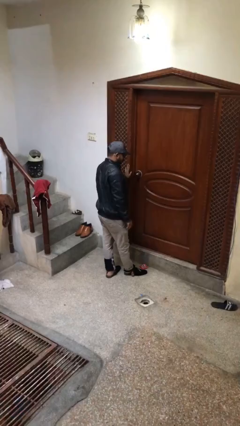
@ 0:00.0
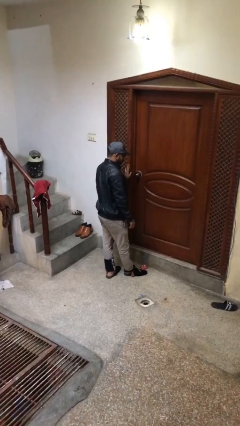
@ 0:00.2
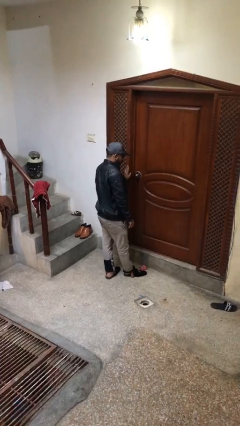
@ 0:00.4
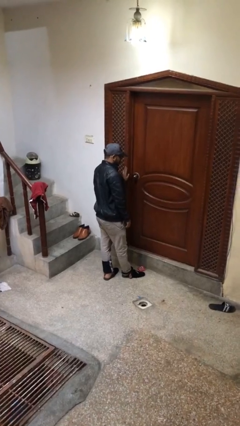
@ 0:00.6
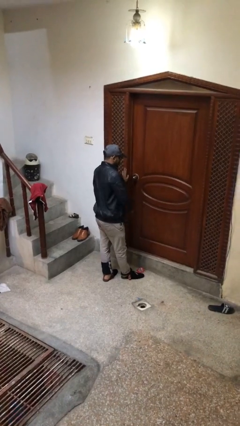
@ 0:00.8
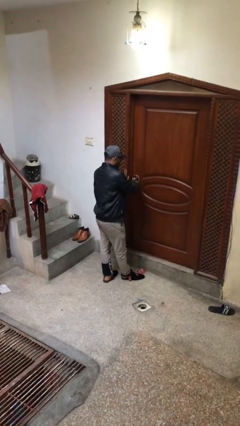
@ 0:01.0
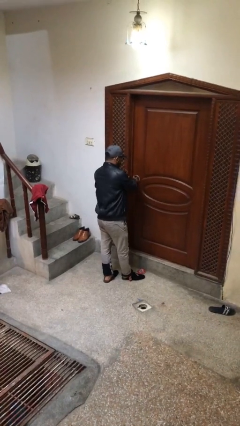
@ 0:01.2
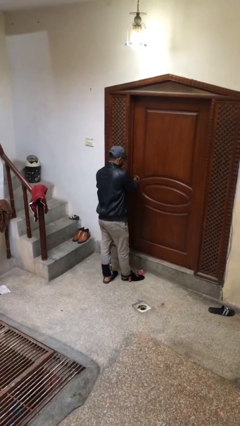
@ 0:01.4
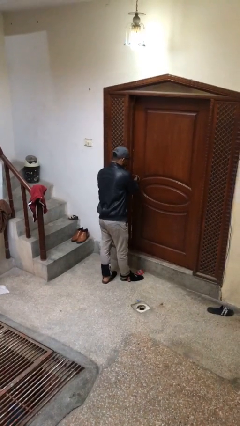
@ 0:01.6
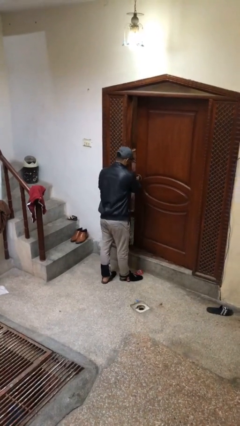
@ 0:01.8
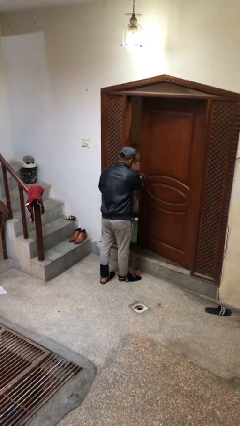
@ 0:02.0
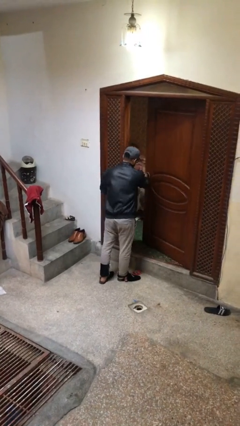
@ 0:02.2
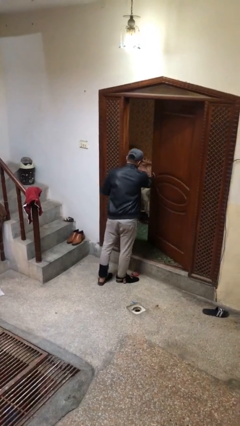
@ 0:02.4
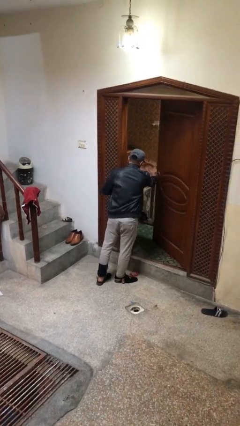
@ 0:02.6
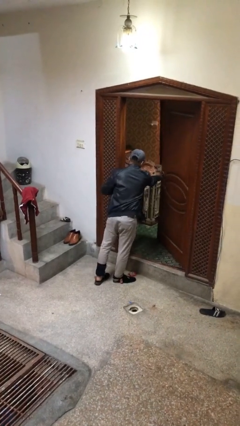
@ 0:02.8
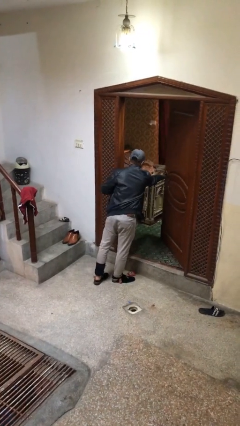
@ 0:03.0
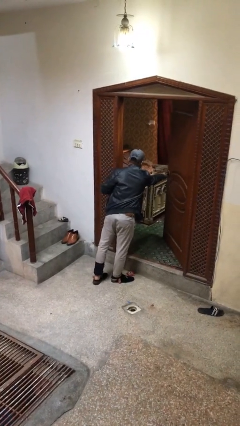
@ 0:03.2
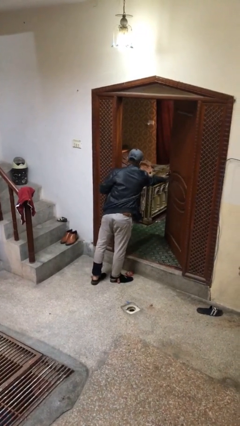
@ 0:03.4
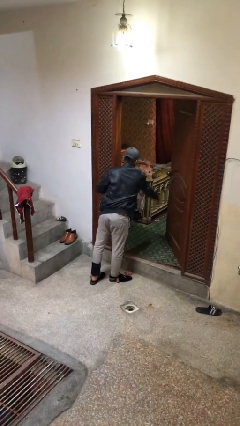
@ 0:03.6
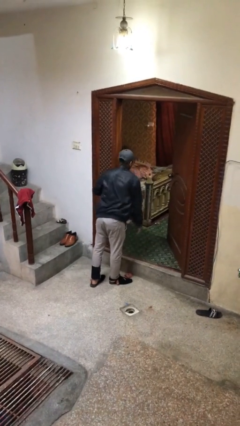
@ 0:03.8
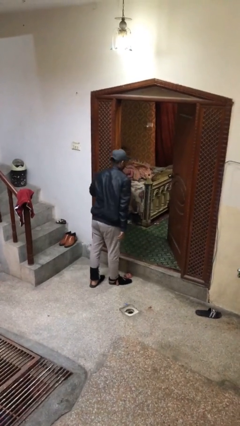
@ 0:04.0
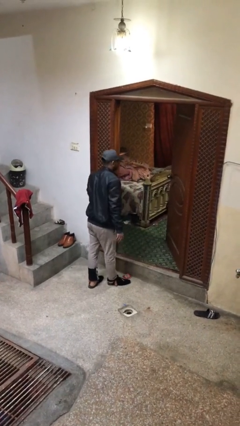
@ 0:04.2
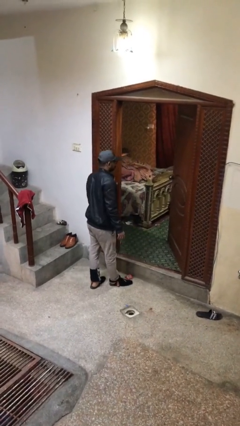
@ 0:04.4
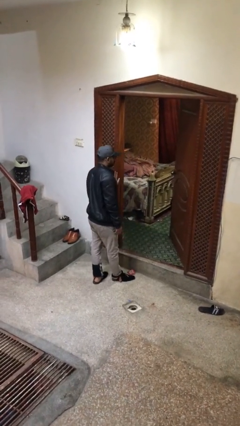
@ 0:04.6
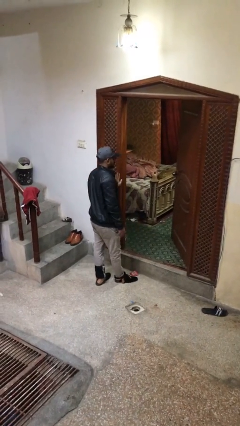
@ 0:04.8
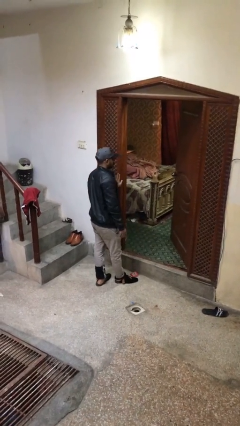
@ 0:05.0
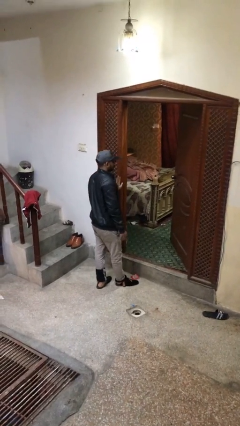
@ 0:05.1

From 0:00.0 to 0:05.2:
person opens facility door

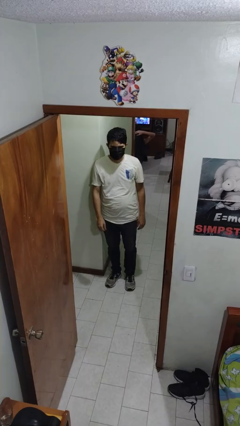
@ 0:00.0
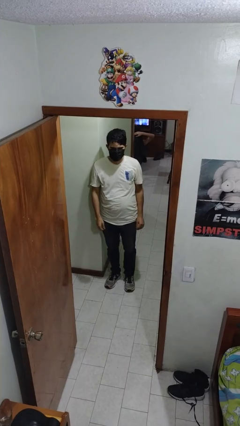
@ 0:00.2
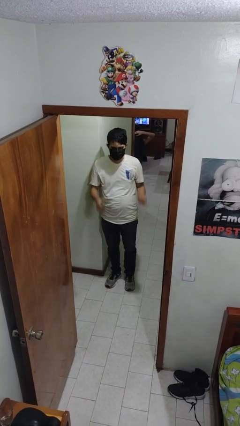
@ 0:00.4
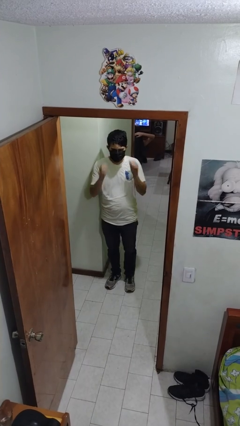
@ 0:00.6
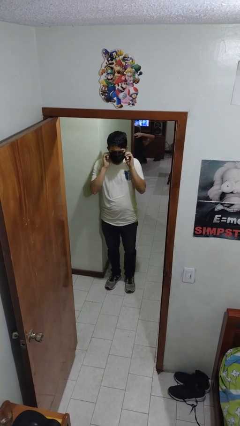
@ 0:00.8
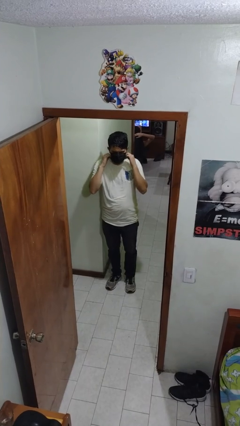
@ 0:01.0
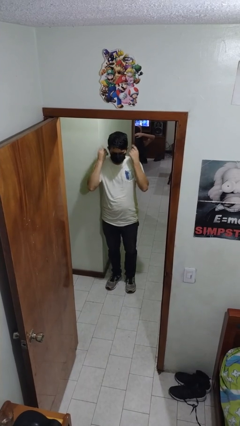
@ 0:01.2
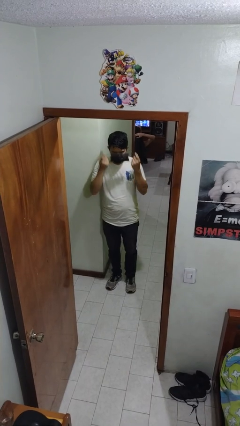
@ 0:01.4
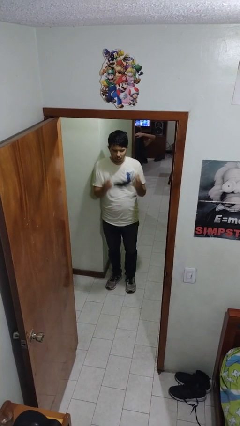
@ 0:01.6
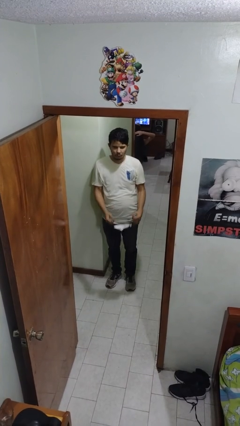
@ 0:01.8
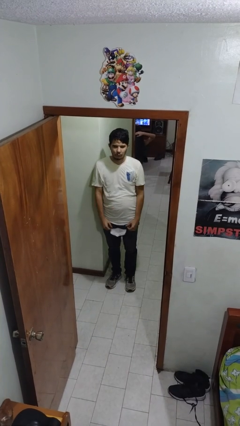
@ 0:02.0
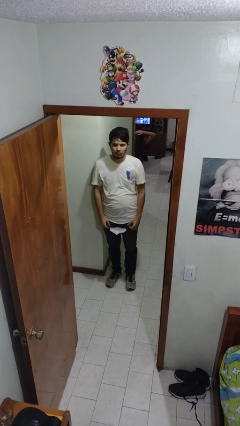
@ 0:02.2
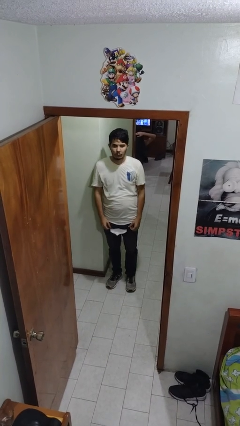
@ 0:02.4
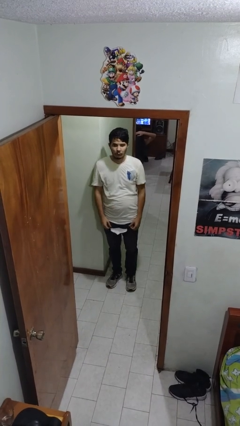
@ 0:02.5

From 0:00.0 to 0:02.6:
person takes off facemask

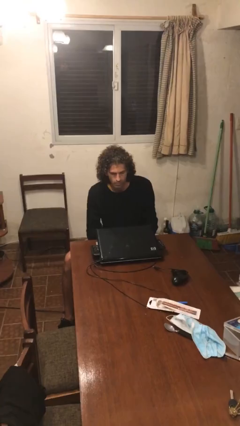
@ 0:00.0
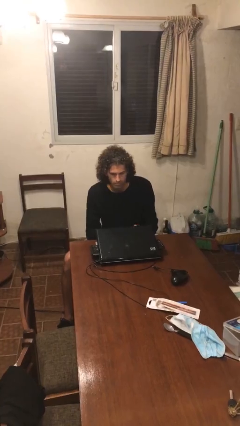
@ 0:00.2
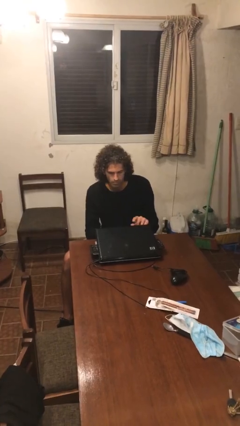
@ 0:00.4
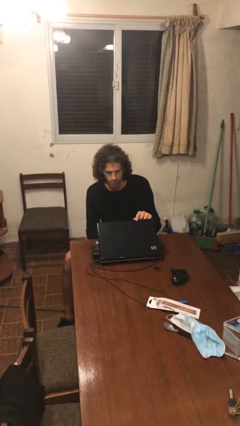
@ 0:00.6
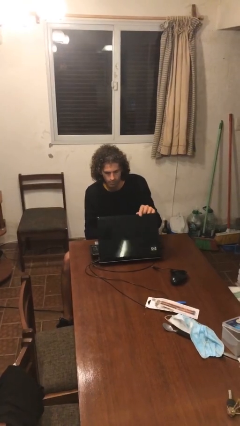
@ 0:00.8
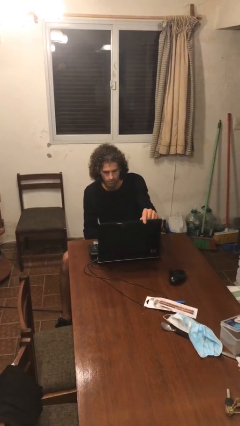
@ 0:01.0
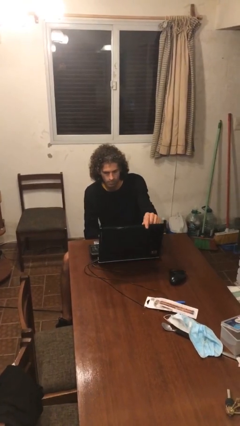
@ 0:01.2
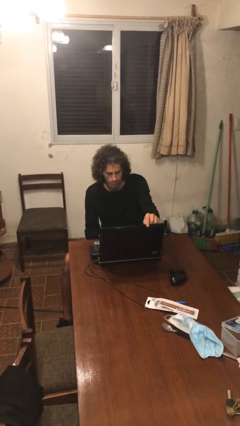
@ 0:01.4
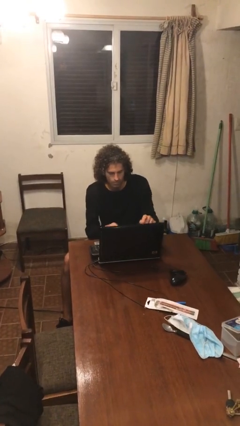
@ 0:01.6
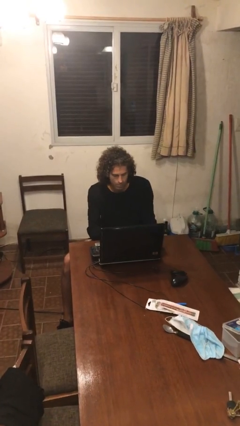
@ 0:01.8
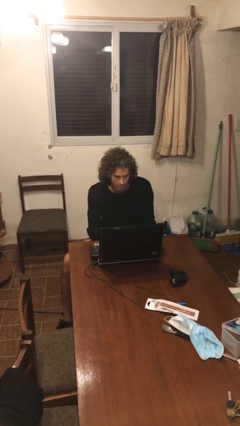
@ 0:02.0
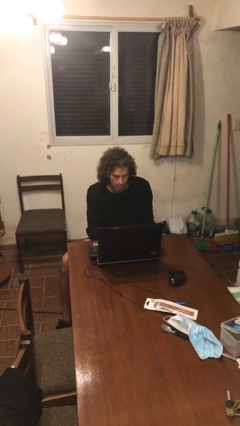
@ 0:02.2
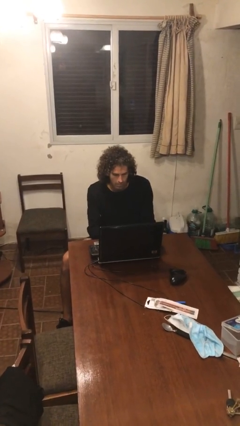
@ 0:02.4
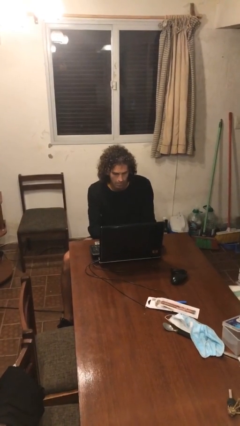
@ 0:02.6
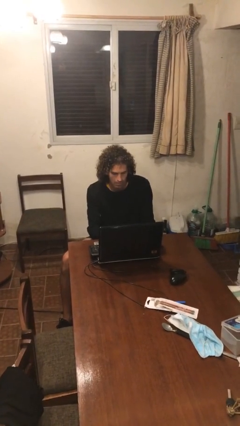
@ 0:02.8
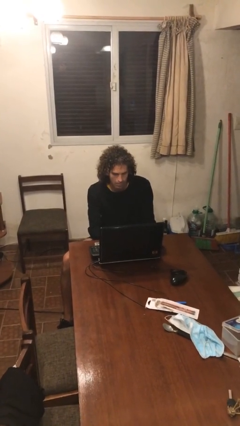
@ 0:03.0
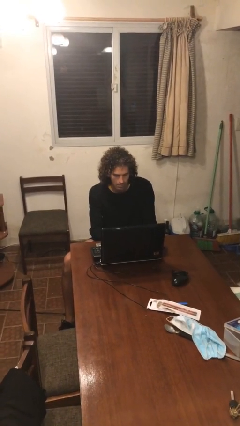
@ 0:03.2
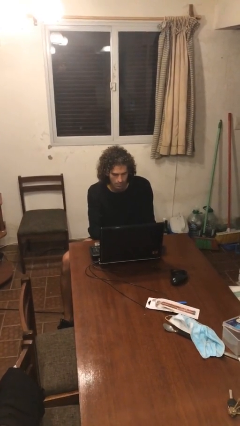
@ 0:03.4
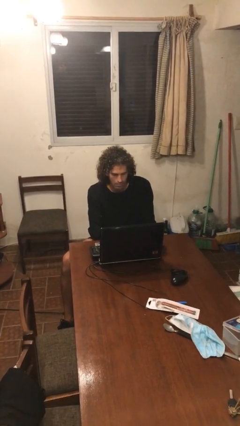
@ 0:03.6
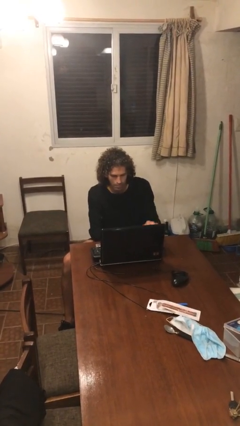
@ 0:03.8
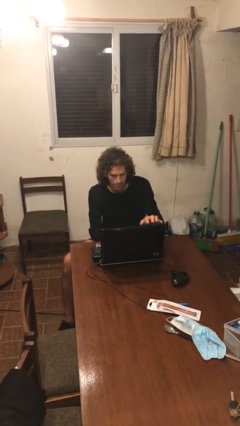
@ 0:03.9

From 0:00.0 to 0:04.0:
person interacts with laptop

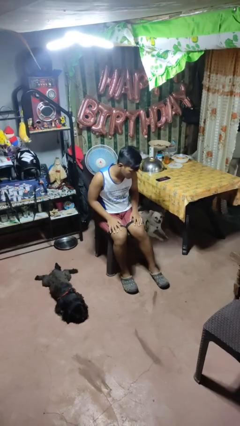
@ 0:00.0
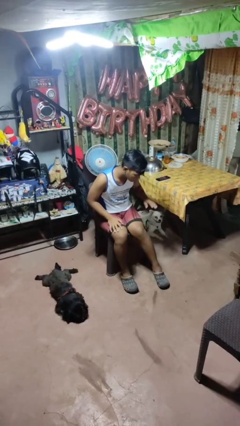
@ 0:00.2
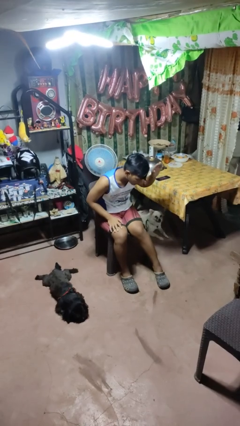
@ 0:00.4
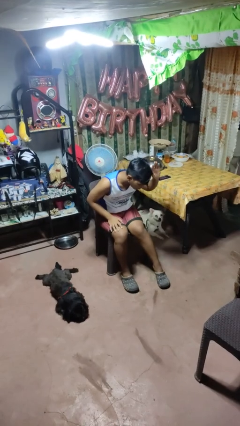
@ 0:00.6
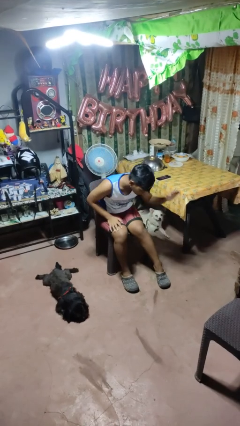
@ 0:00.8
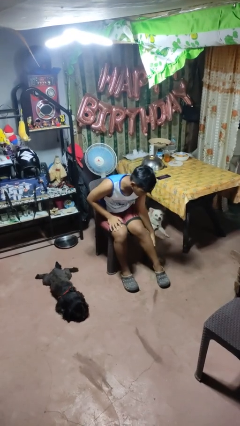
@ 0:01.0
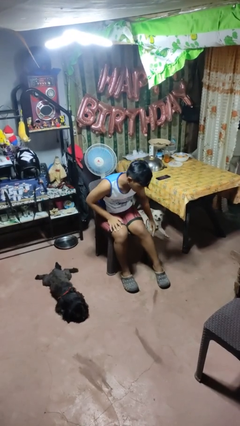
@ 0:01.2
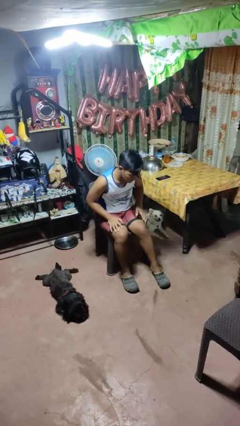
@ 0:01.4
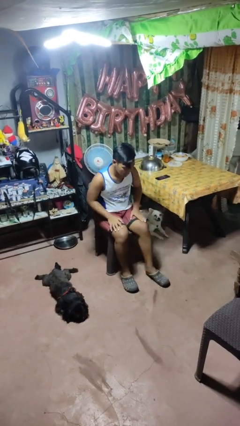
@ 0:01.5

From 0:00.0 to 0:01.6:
person swats bug

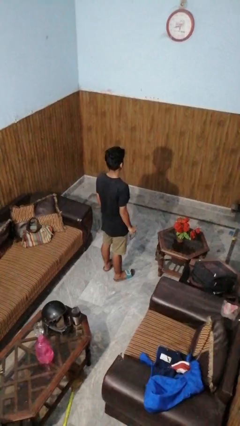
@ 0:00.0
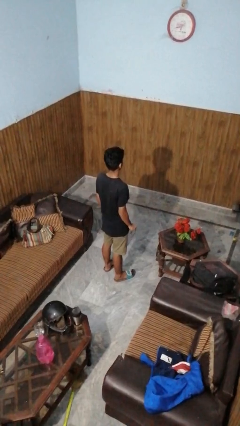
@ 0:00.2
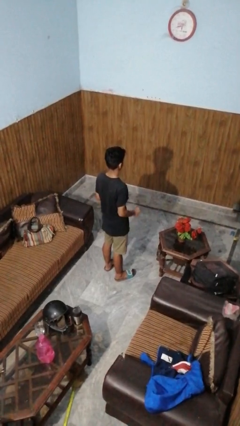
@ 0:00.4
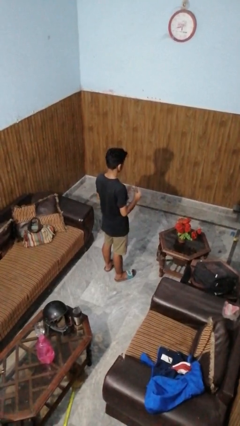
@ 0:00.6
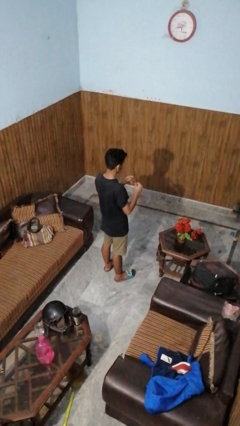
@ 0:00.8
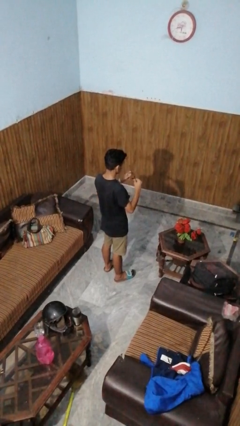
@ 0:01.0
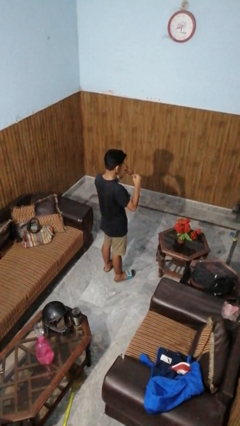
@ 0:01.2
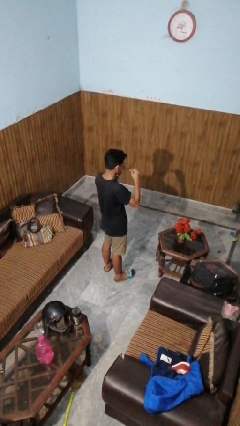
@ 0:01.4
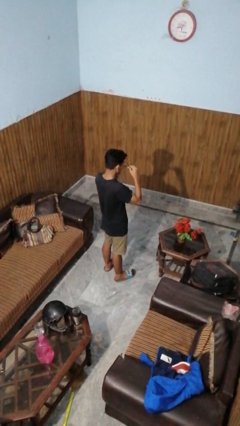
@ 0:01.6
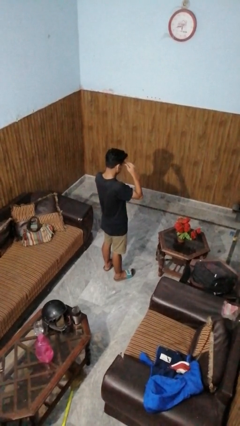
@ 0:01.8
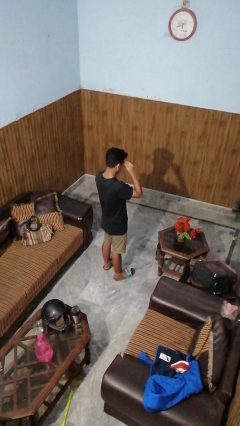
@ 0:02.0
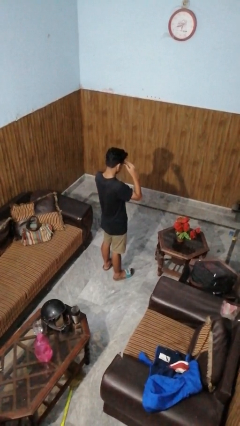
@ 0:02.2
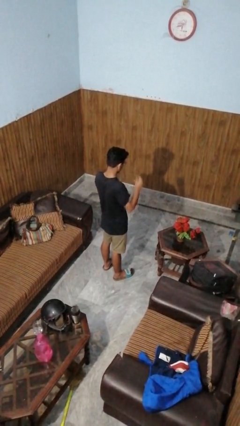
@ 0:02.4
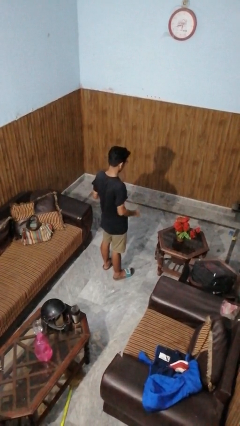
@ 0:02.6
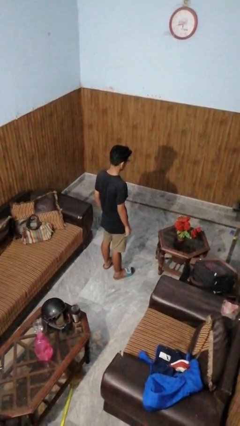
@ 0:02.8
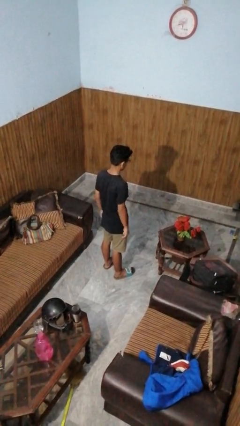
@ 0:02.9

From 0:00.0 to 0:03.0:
person puts on glasses

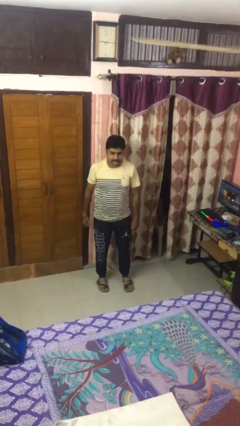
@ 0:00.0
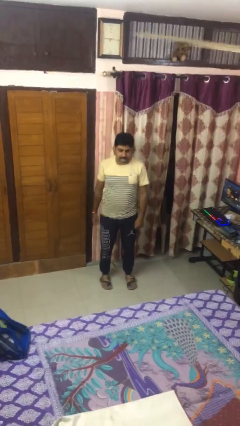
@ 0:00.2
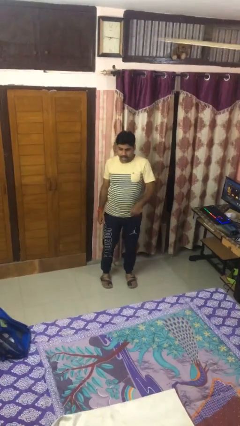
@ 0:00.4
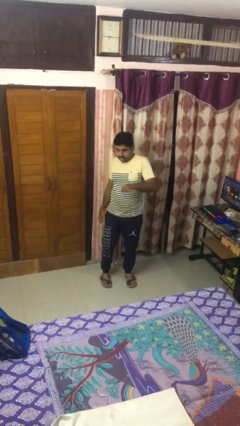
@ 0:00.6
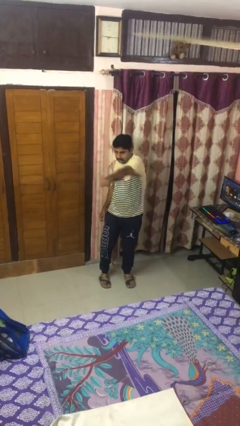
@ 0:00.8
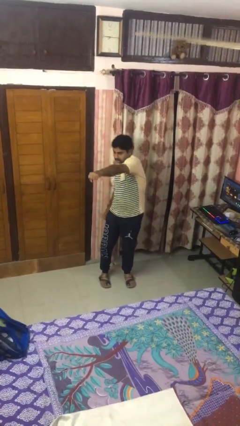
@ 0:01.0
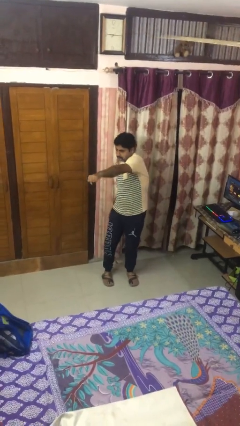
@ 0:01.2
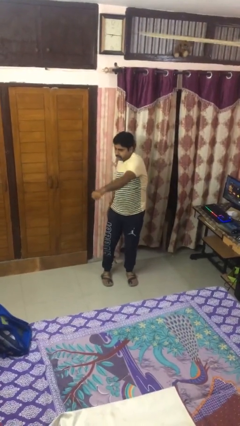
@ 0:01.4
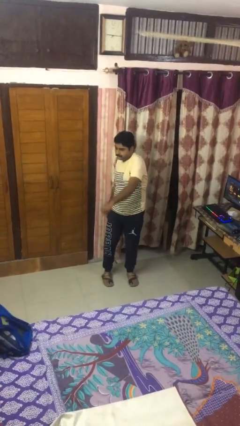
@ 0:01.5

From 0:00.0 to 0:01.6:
person punches
